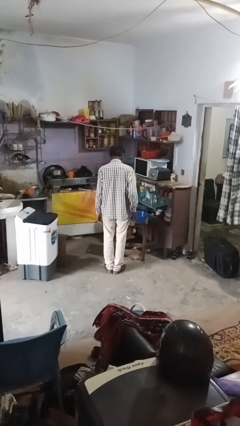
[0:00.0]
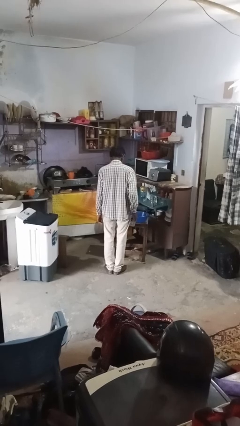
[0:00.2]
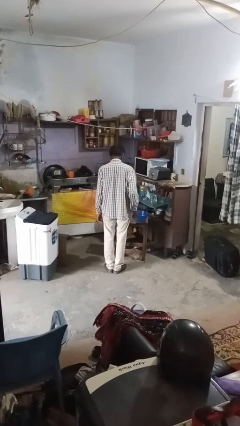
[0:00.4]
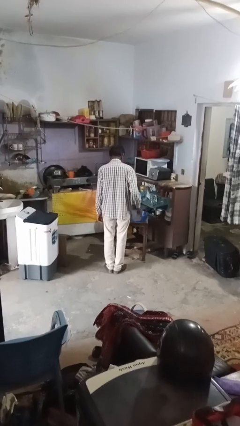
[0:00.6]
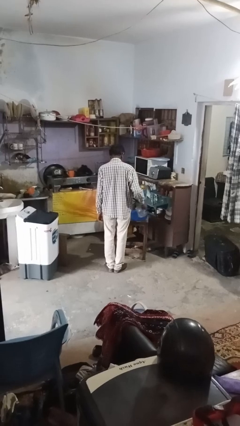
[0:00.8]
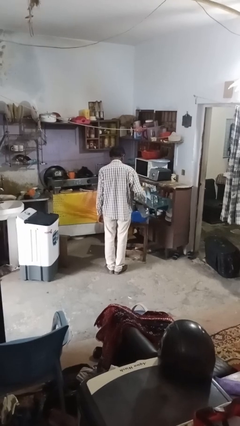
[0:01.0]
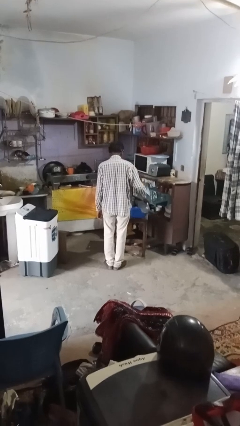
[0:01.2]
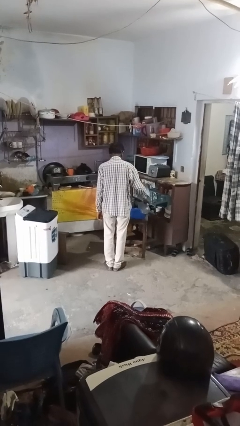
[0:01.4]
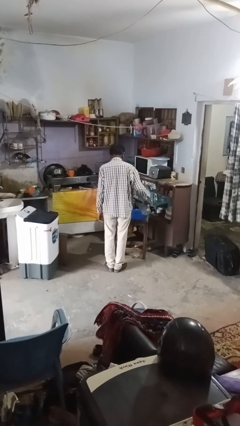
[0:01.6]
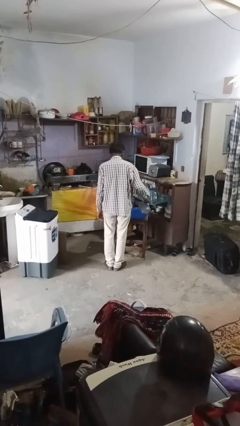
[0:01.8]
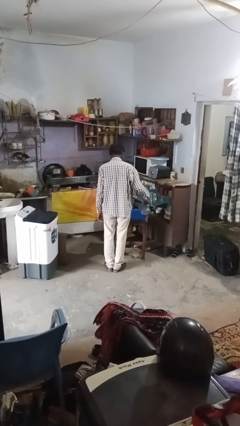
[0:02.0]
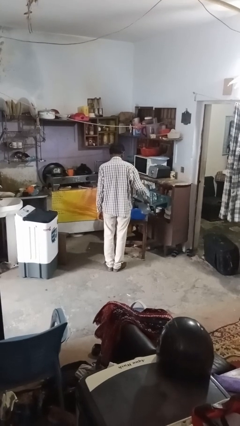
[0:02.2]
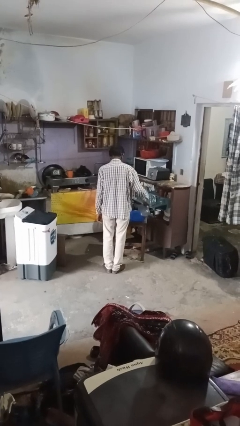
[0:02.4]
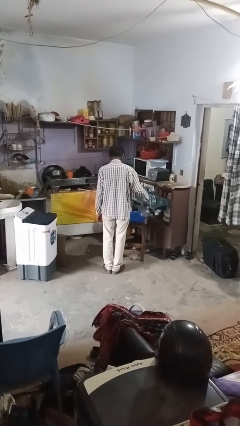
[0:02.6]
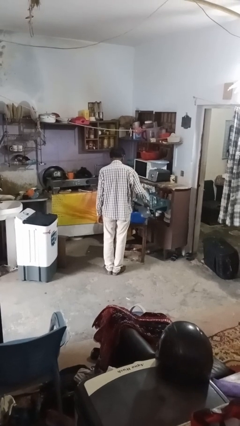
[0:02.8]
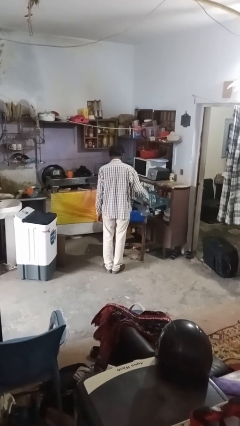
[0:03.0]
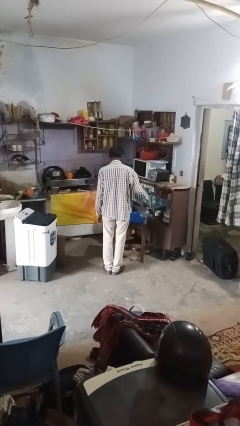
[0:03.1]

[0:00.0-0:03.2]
person pours into bowl

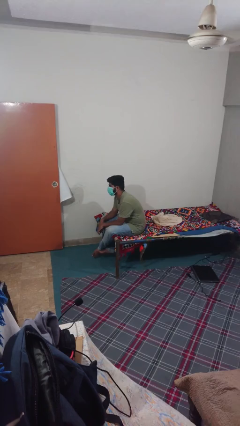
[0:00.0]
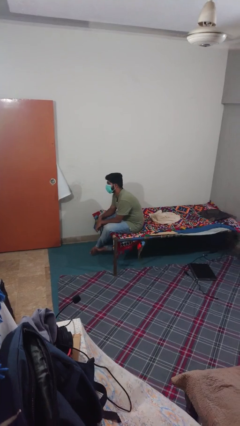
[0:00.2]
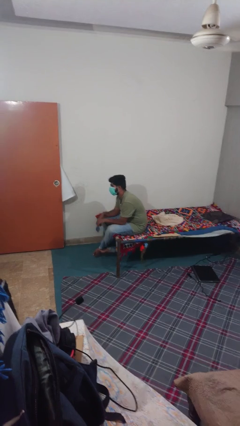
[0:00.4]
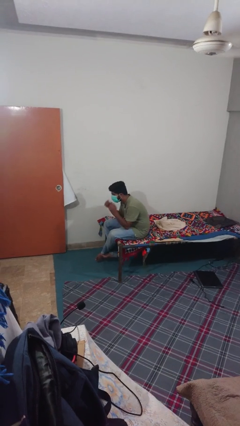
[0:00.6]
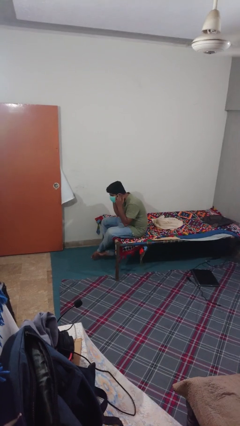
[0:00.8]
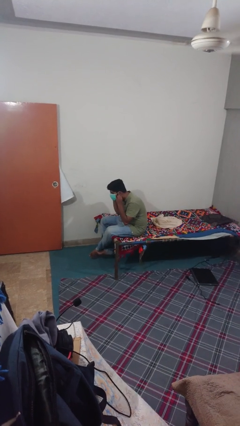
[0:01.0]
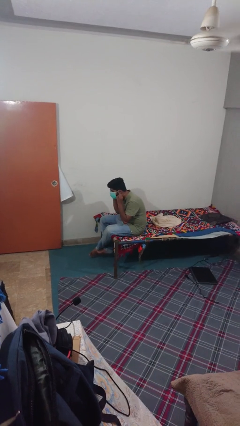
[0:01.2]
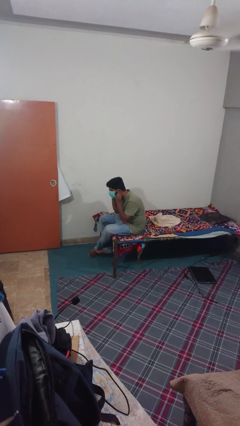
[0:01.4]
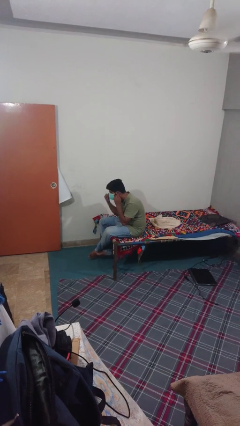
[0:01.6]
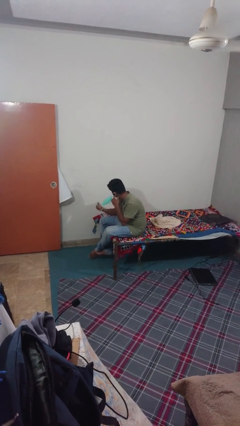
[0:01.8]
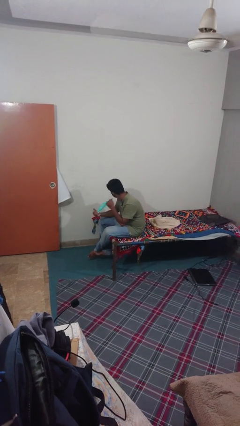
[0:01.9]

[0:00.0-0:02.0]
person takes off facemask

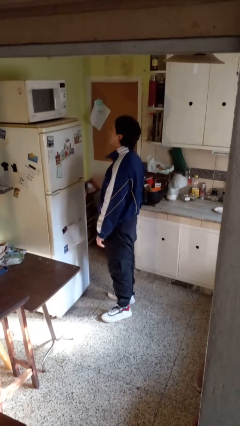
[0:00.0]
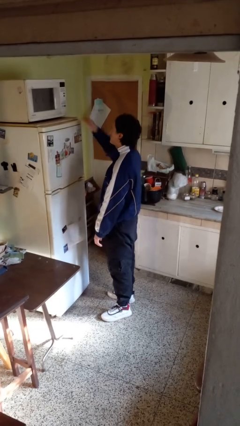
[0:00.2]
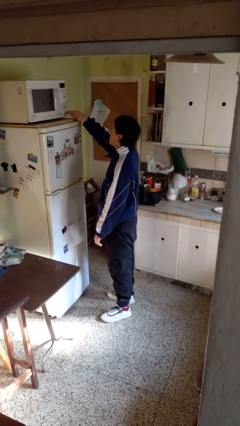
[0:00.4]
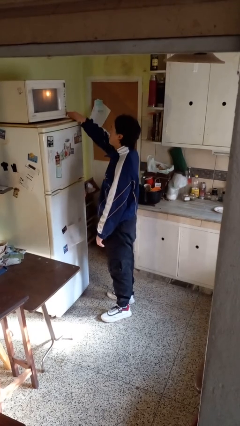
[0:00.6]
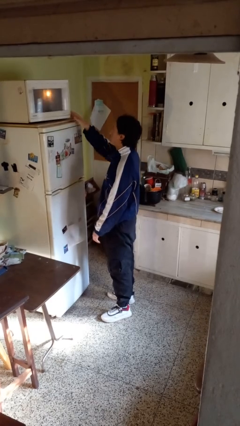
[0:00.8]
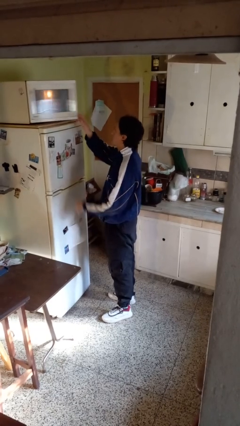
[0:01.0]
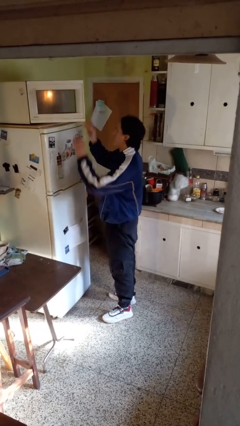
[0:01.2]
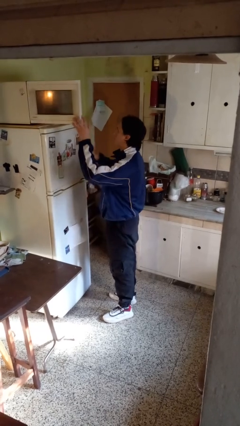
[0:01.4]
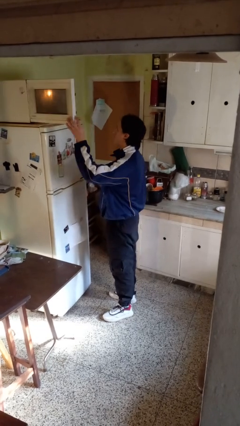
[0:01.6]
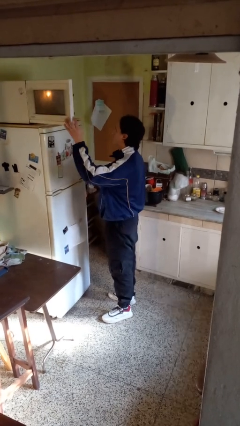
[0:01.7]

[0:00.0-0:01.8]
person opens microwave

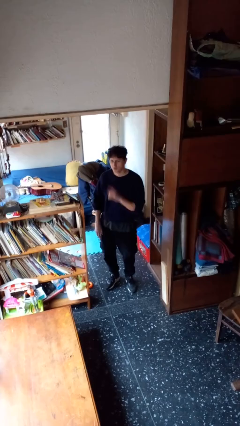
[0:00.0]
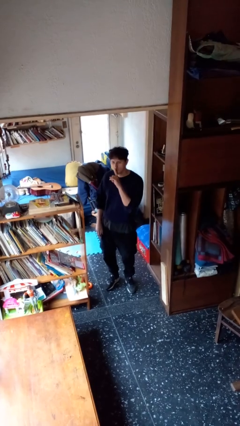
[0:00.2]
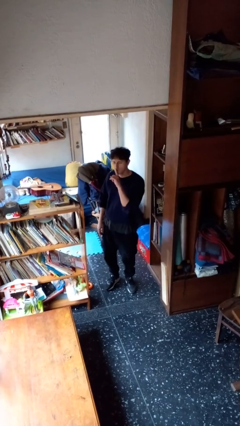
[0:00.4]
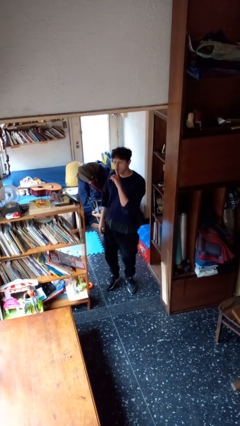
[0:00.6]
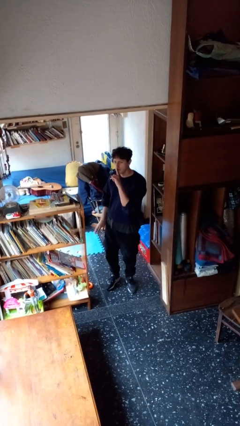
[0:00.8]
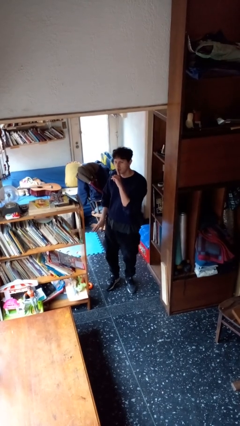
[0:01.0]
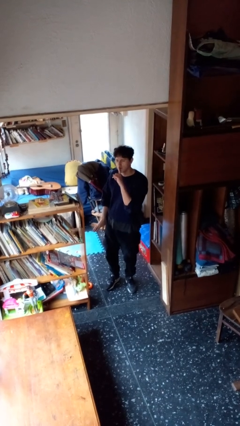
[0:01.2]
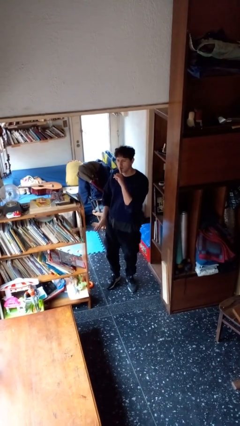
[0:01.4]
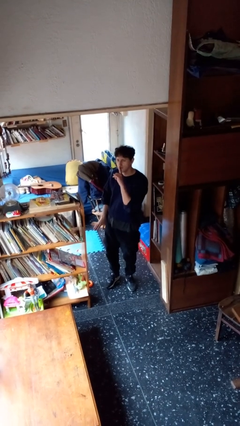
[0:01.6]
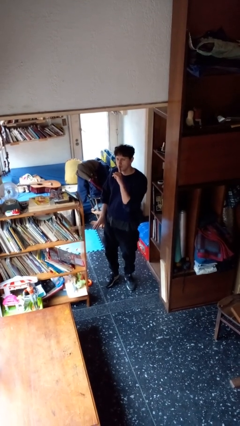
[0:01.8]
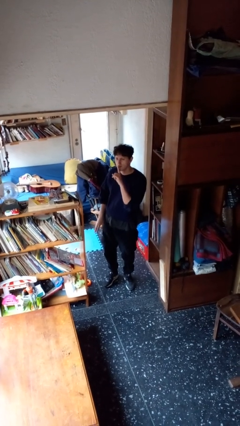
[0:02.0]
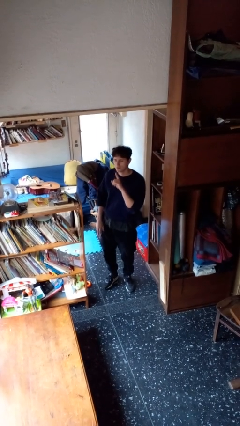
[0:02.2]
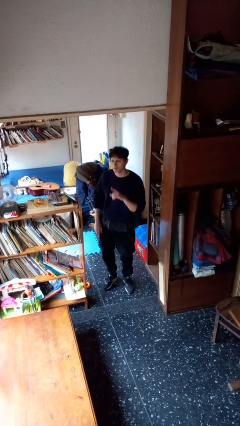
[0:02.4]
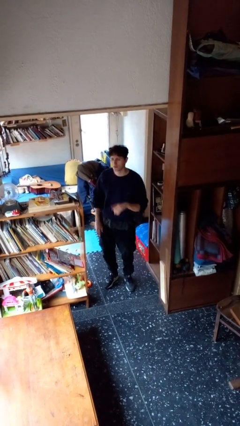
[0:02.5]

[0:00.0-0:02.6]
person gestures be quiet

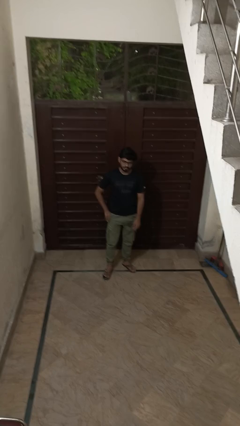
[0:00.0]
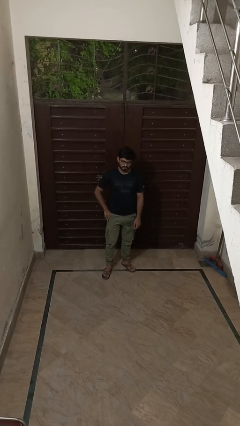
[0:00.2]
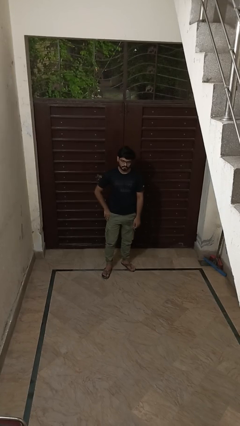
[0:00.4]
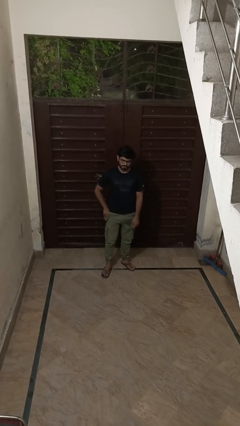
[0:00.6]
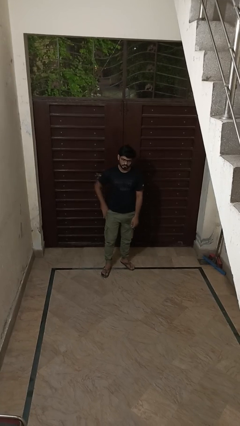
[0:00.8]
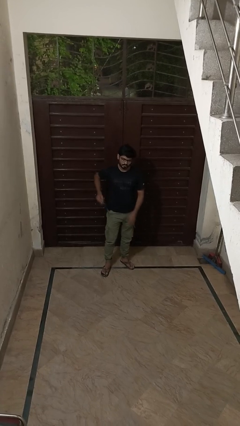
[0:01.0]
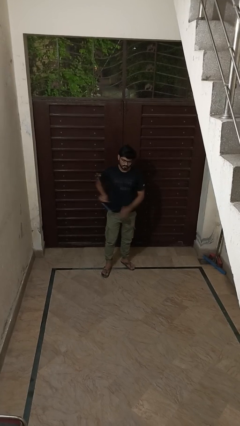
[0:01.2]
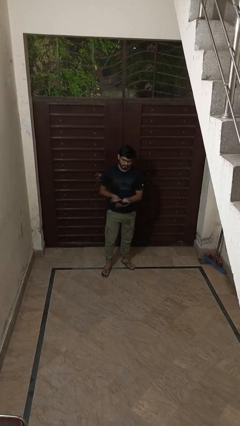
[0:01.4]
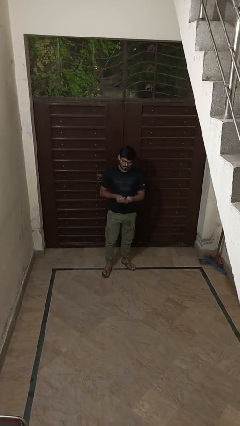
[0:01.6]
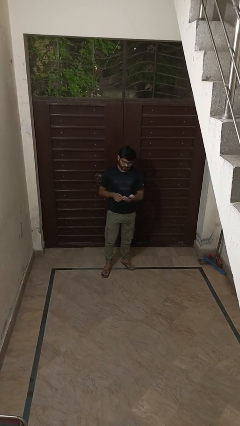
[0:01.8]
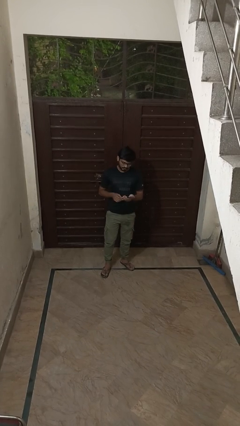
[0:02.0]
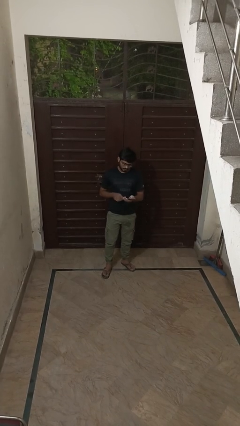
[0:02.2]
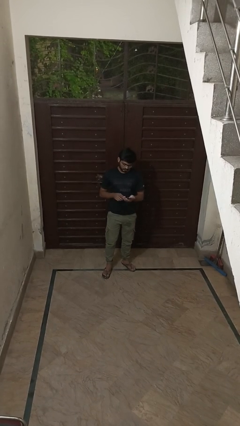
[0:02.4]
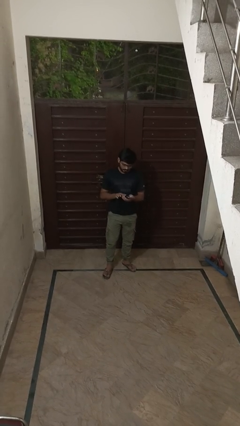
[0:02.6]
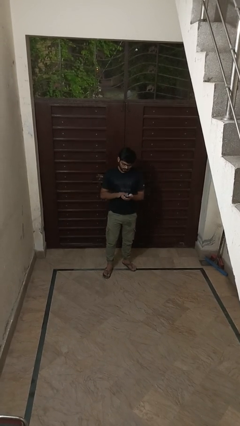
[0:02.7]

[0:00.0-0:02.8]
person takes phone from pocket

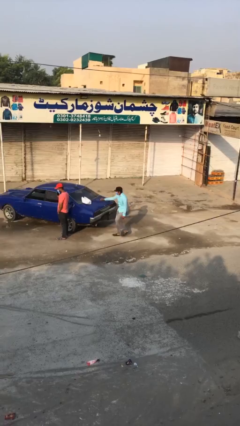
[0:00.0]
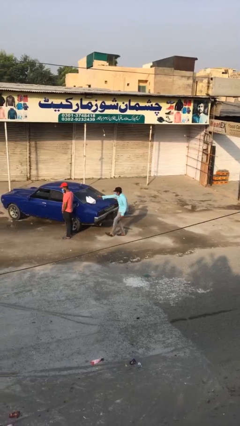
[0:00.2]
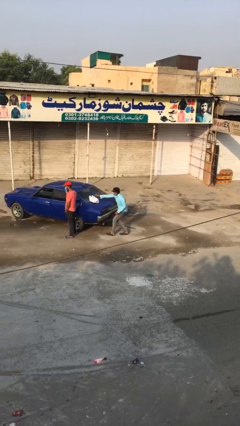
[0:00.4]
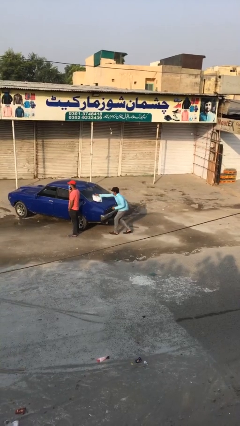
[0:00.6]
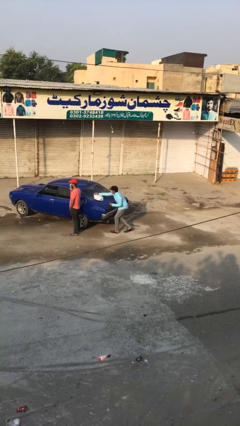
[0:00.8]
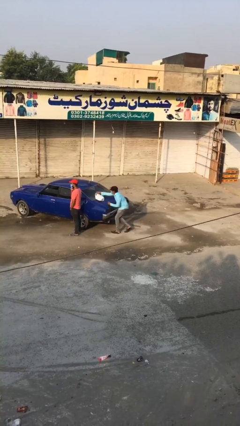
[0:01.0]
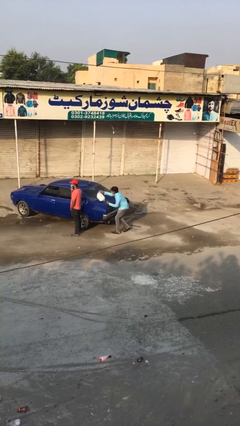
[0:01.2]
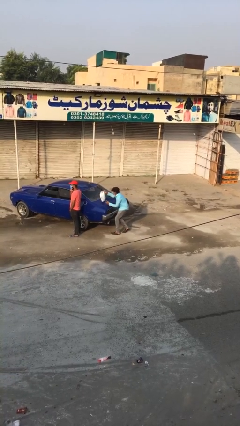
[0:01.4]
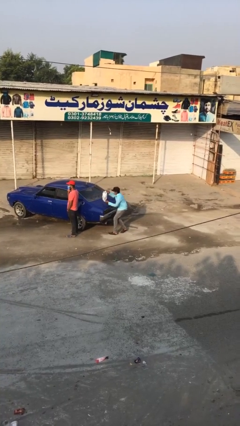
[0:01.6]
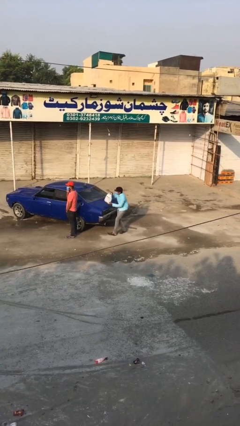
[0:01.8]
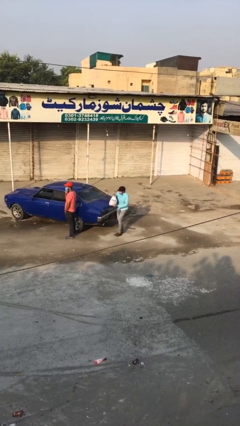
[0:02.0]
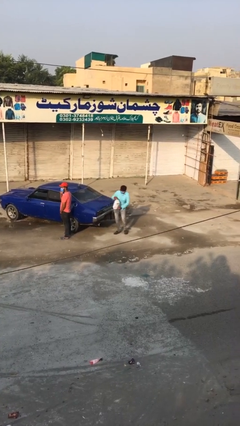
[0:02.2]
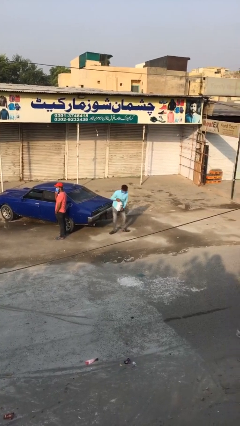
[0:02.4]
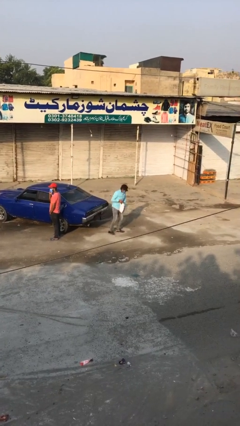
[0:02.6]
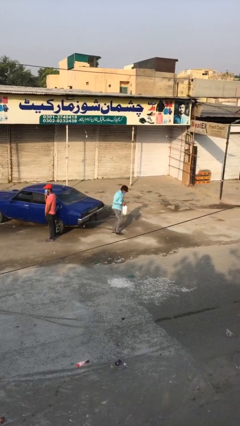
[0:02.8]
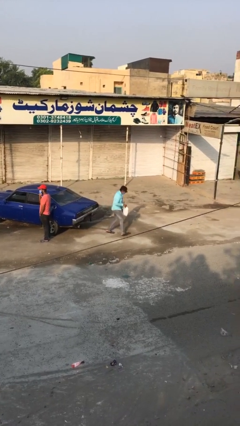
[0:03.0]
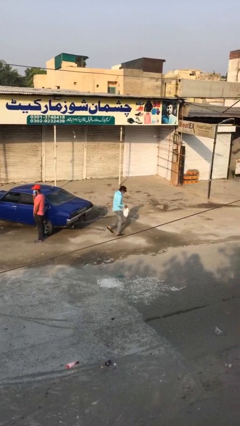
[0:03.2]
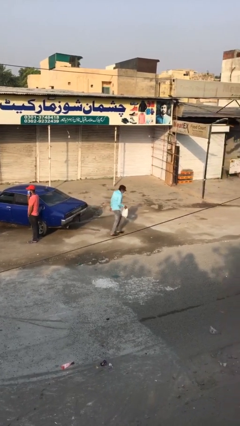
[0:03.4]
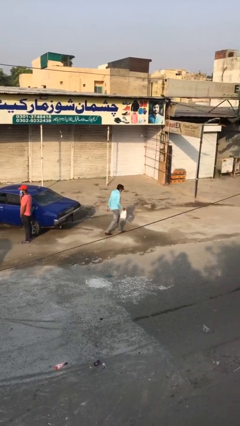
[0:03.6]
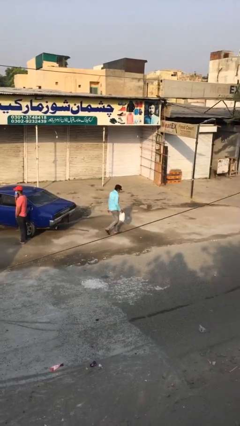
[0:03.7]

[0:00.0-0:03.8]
person steals object from person

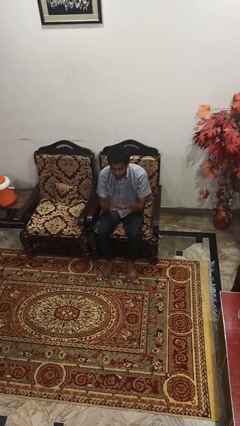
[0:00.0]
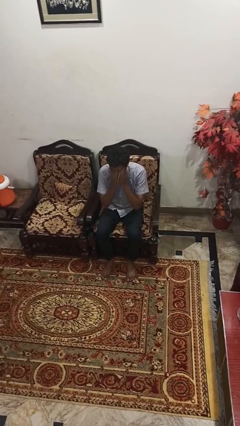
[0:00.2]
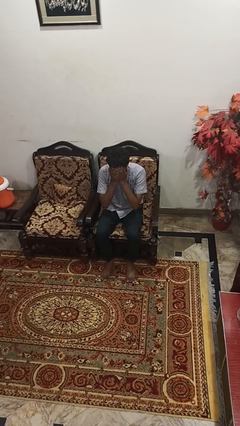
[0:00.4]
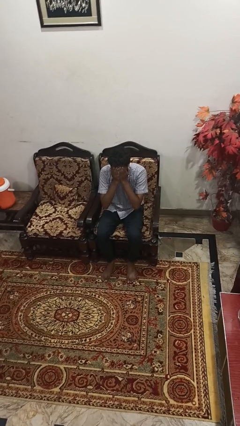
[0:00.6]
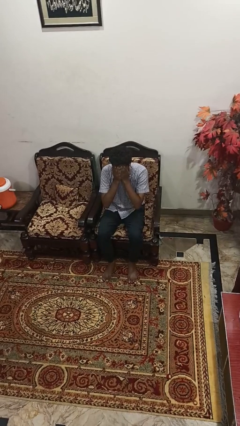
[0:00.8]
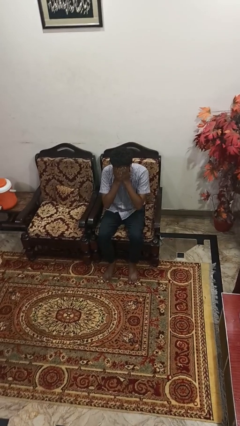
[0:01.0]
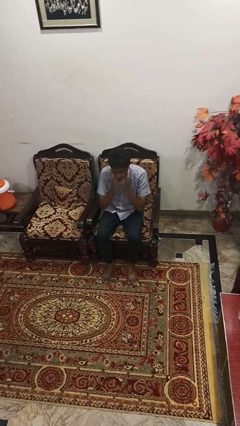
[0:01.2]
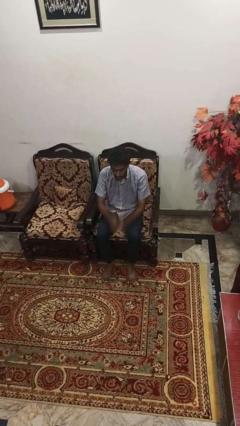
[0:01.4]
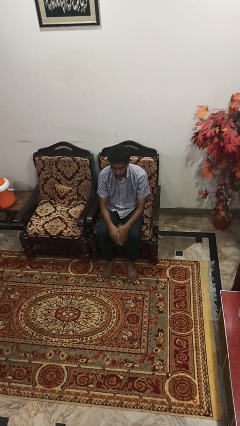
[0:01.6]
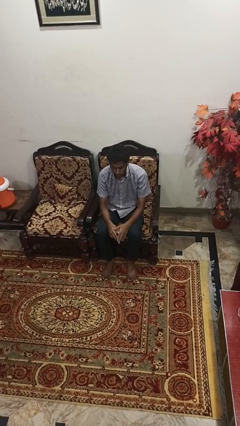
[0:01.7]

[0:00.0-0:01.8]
person covers face with hands
